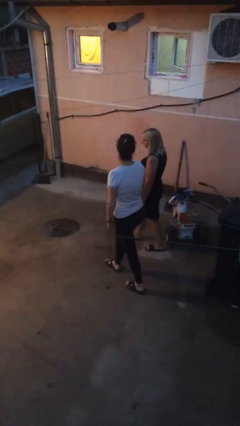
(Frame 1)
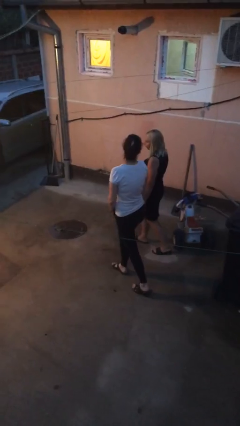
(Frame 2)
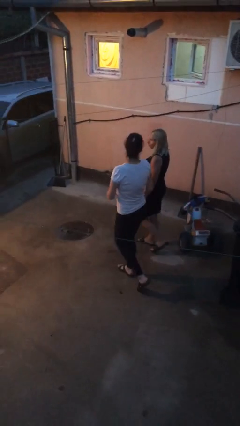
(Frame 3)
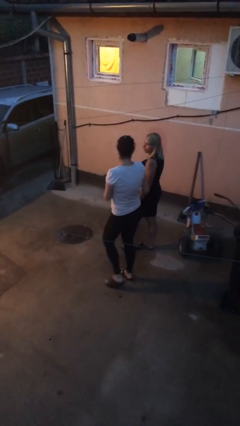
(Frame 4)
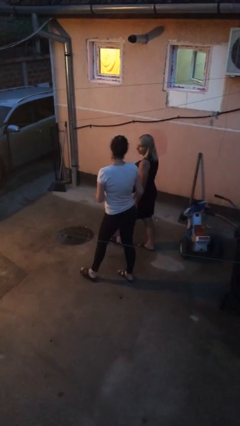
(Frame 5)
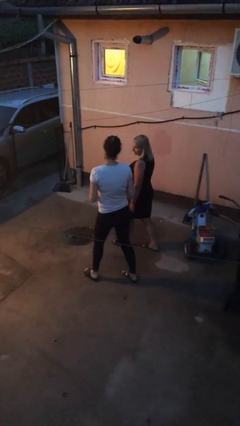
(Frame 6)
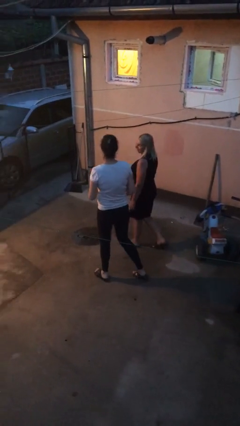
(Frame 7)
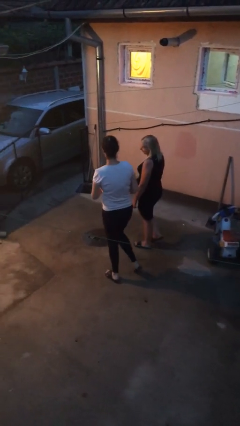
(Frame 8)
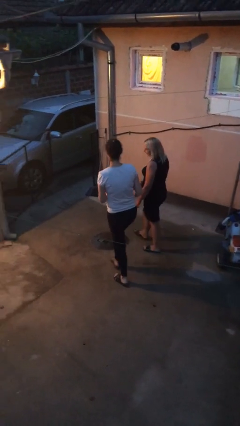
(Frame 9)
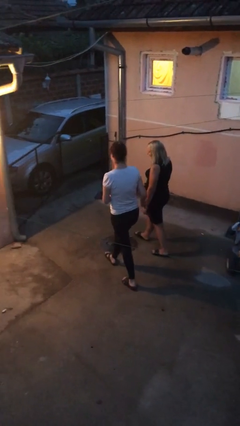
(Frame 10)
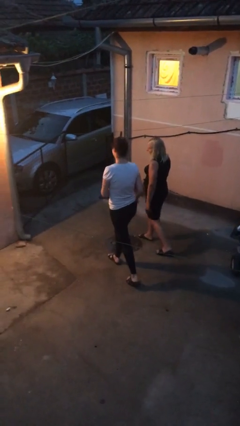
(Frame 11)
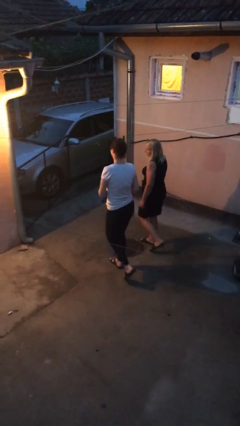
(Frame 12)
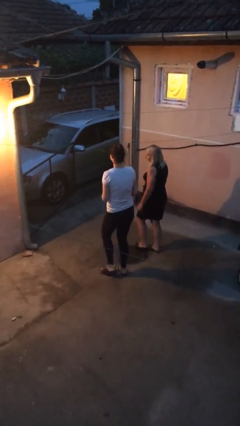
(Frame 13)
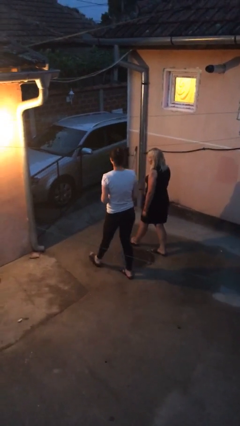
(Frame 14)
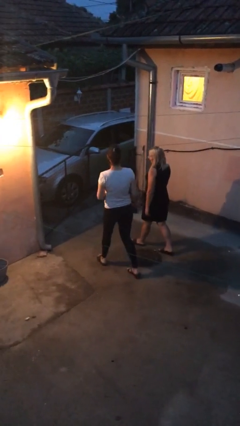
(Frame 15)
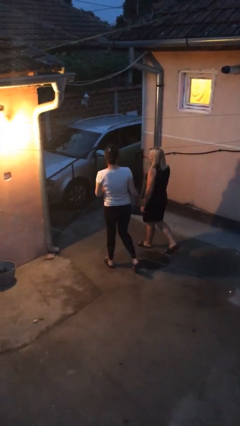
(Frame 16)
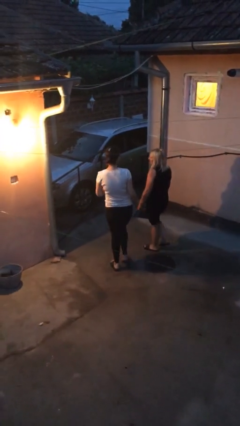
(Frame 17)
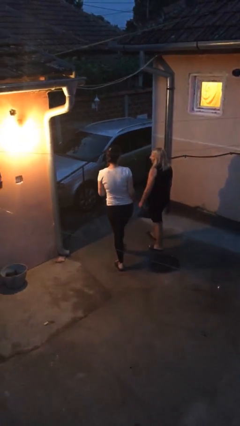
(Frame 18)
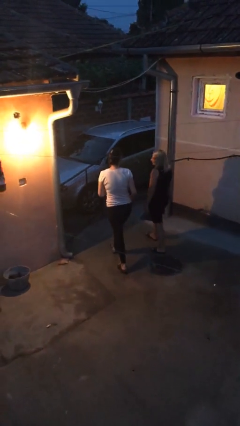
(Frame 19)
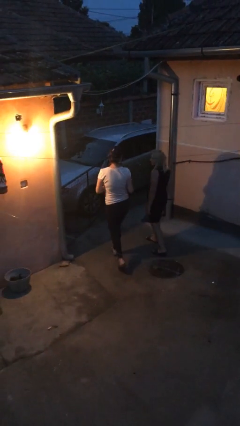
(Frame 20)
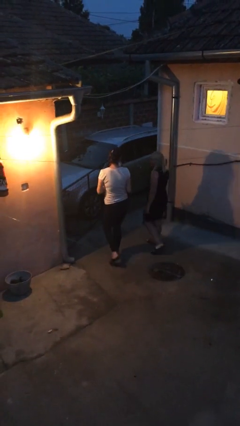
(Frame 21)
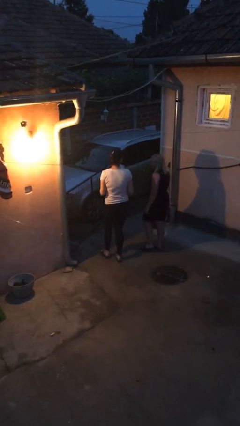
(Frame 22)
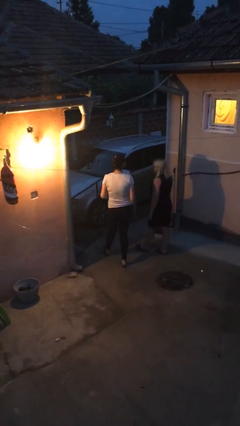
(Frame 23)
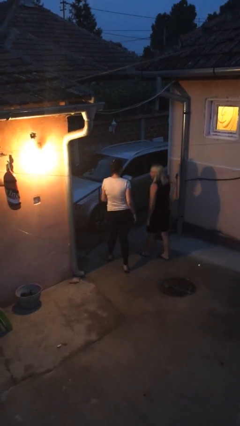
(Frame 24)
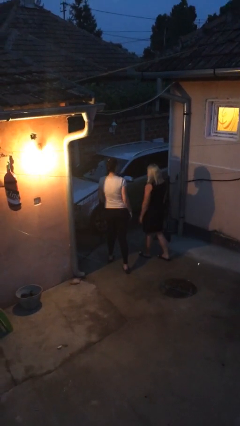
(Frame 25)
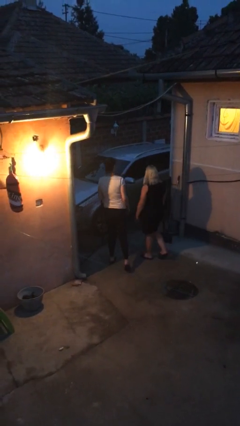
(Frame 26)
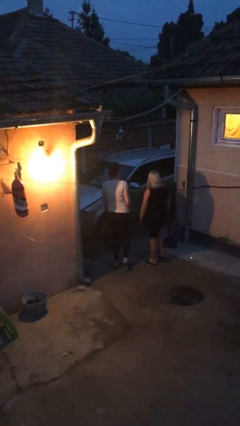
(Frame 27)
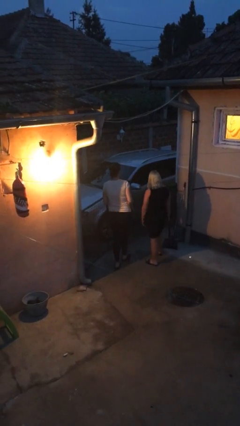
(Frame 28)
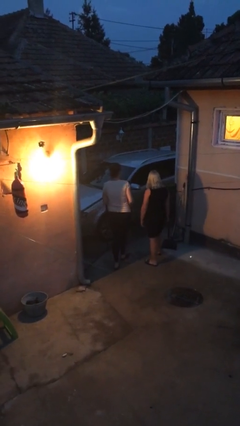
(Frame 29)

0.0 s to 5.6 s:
person talks to person

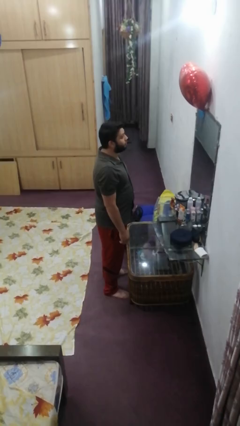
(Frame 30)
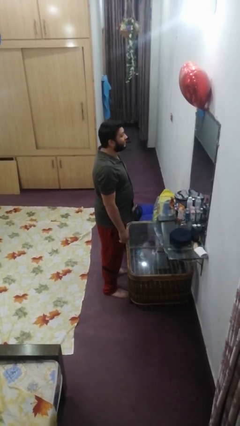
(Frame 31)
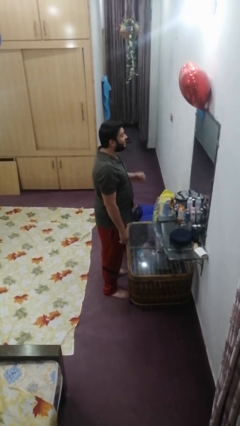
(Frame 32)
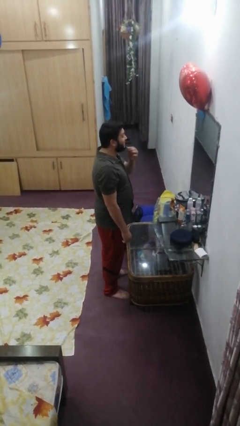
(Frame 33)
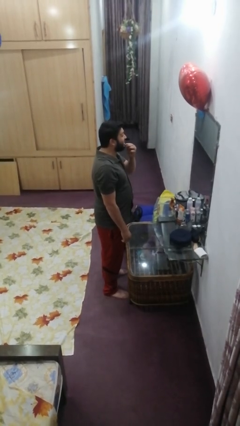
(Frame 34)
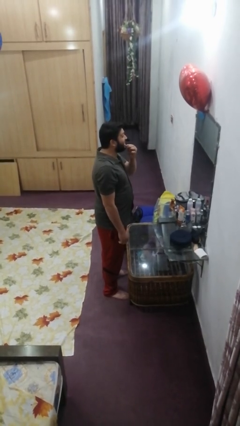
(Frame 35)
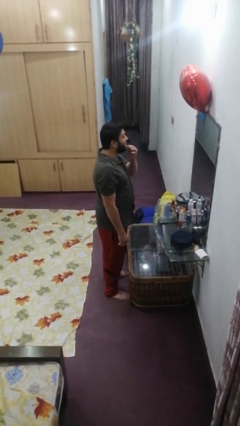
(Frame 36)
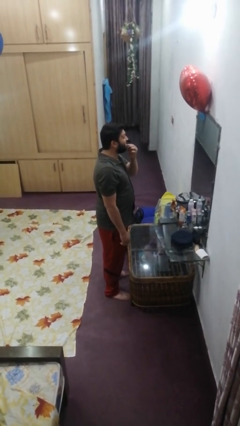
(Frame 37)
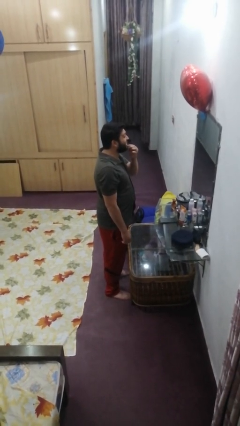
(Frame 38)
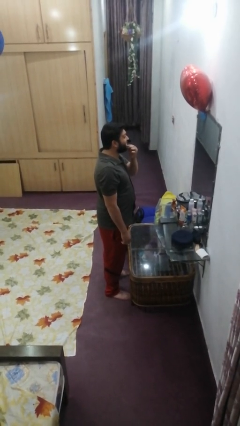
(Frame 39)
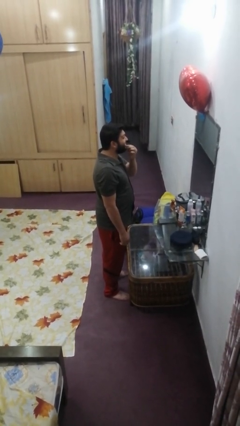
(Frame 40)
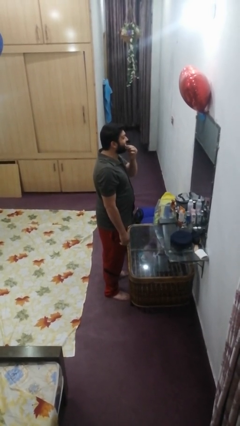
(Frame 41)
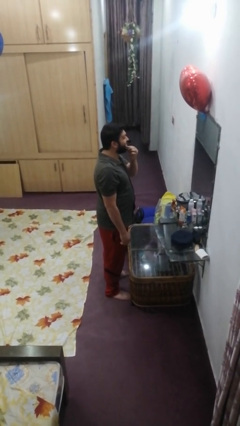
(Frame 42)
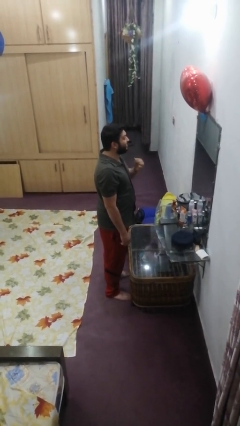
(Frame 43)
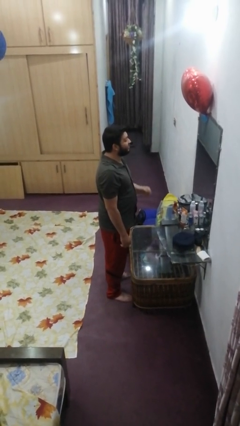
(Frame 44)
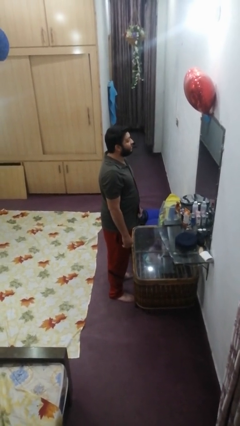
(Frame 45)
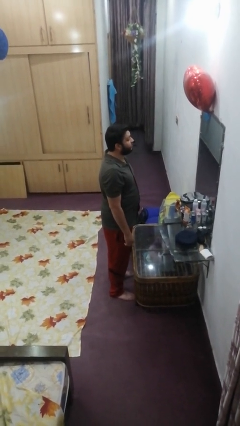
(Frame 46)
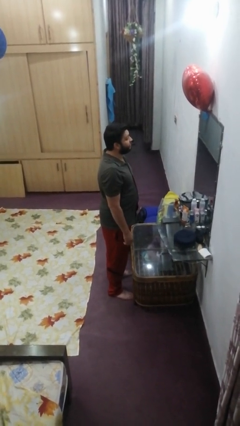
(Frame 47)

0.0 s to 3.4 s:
person flosses

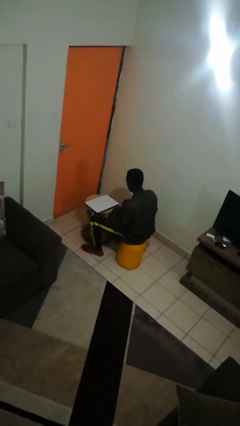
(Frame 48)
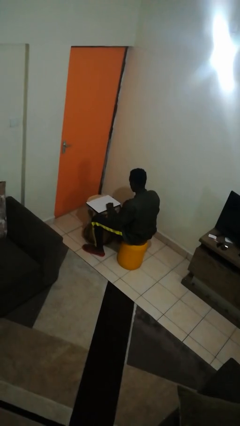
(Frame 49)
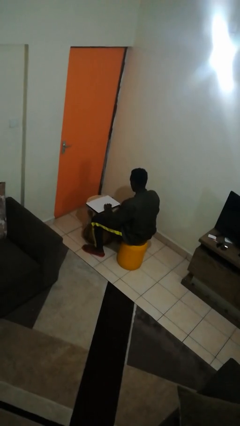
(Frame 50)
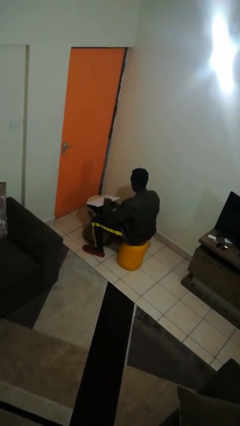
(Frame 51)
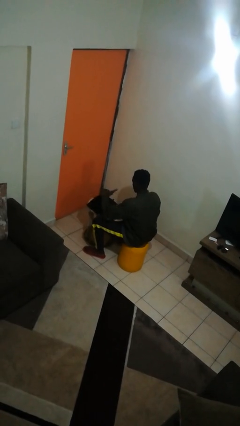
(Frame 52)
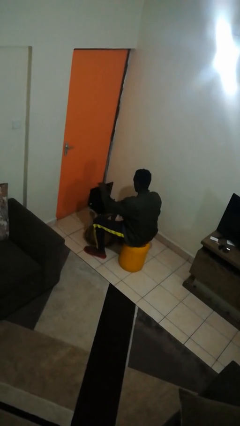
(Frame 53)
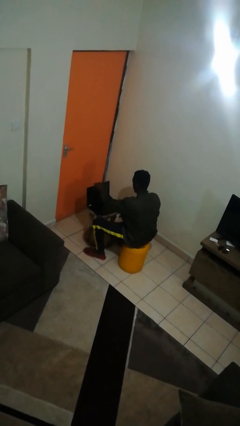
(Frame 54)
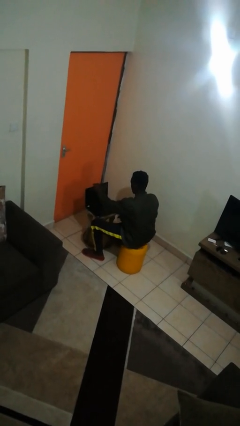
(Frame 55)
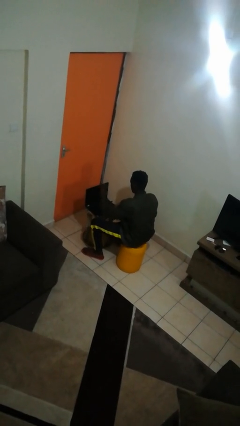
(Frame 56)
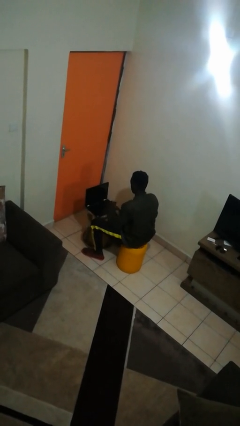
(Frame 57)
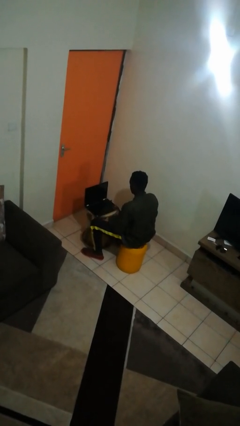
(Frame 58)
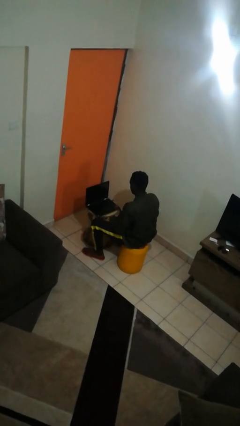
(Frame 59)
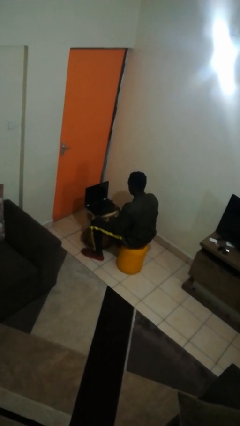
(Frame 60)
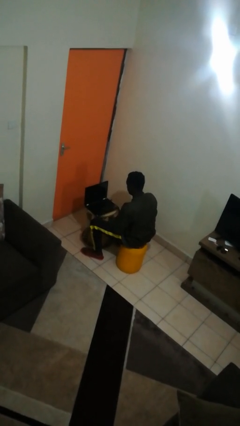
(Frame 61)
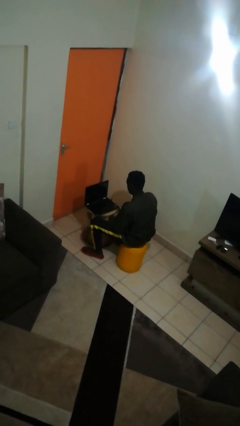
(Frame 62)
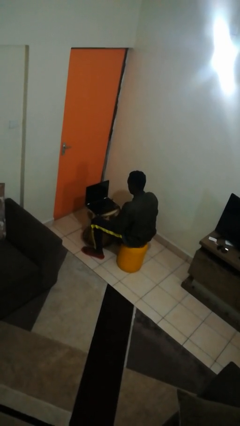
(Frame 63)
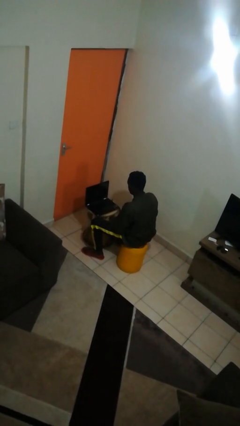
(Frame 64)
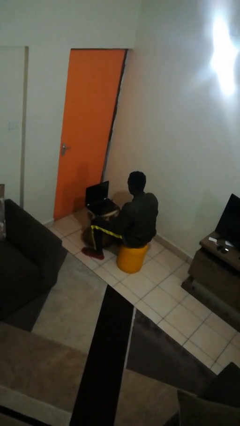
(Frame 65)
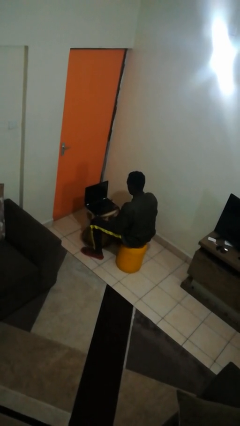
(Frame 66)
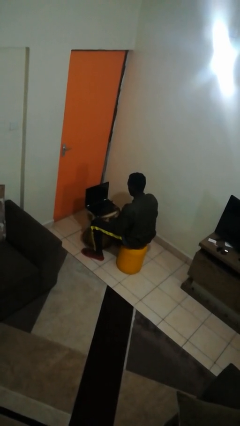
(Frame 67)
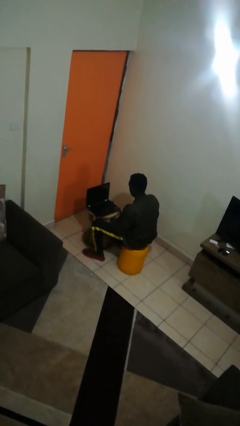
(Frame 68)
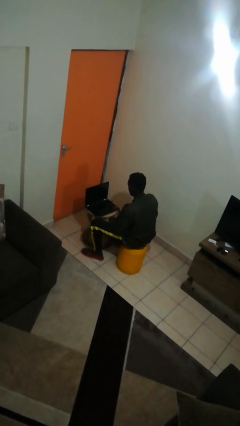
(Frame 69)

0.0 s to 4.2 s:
person opens laptop

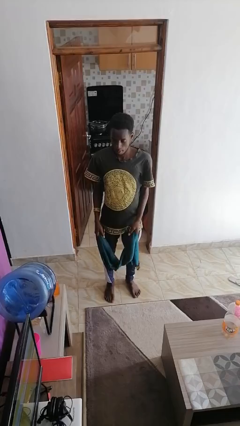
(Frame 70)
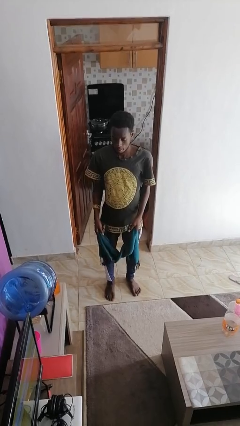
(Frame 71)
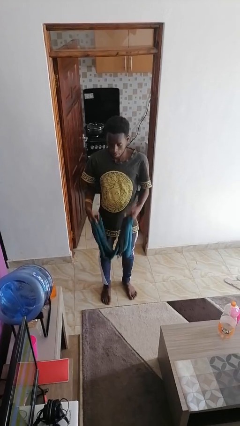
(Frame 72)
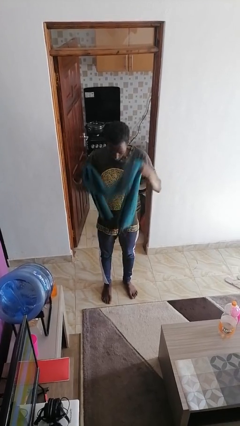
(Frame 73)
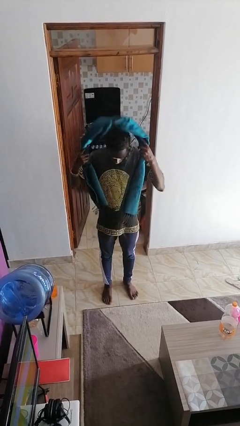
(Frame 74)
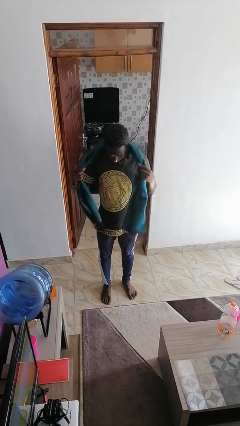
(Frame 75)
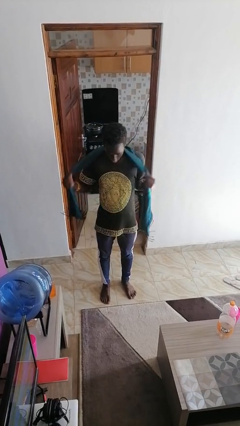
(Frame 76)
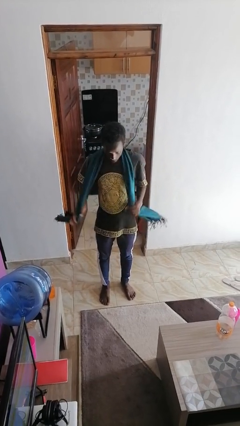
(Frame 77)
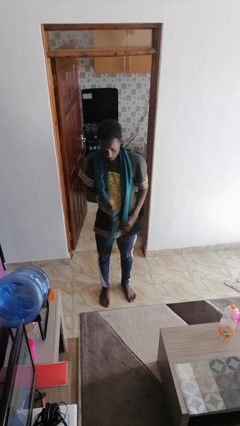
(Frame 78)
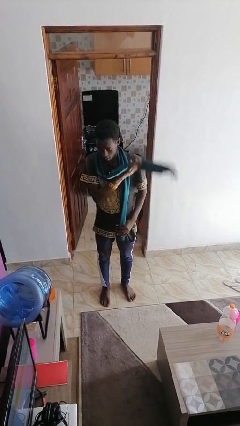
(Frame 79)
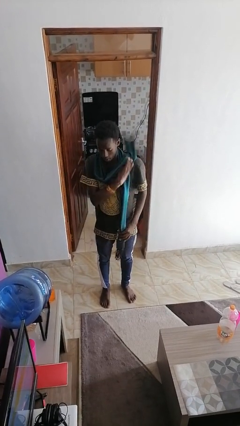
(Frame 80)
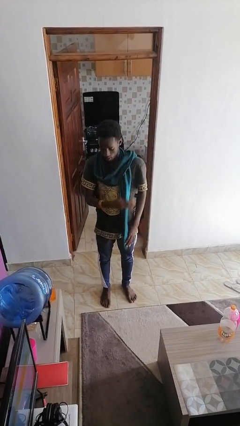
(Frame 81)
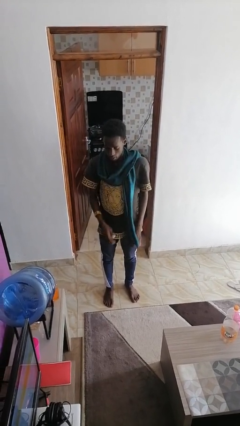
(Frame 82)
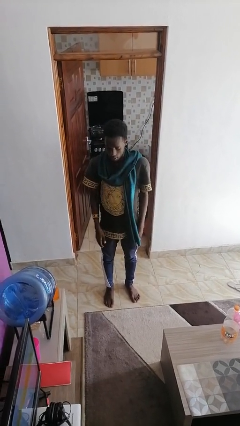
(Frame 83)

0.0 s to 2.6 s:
person puts on scarf

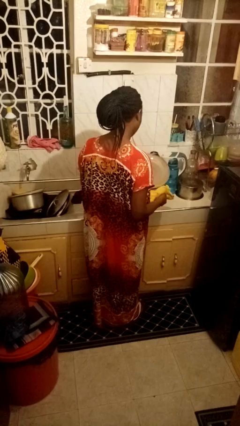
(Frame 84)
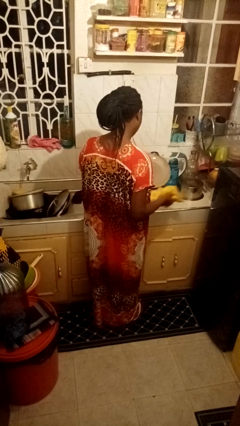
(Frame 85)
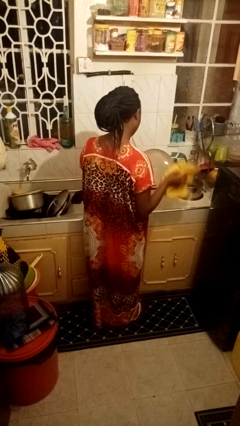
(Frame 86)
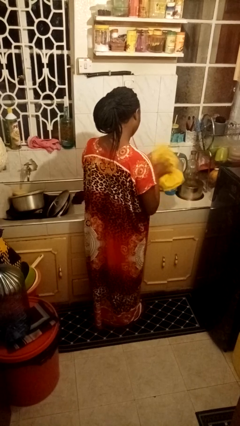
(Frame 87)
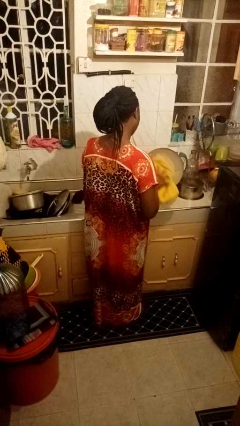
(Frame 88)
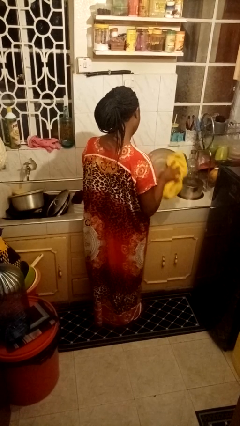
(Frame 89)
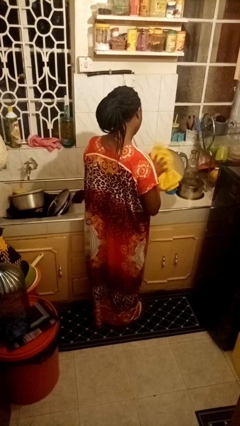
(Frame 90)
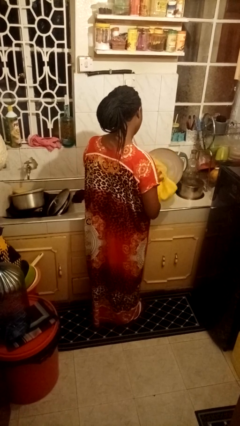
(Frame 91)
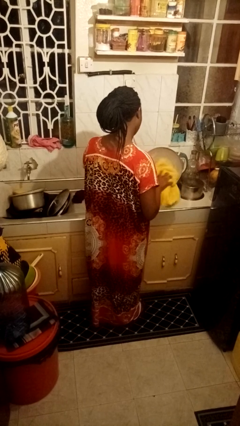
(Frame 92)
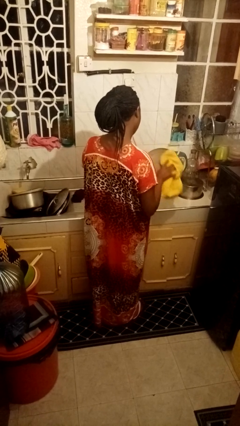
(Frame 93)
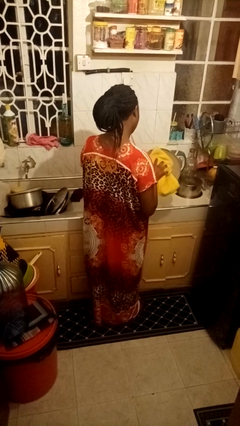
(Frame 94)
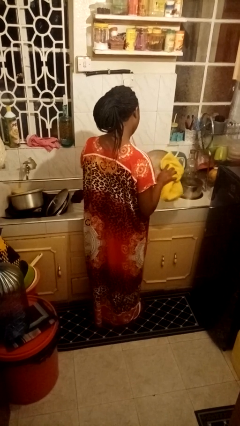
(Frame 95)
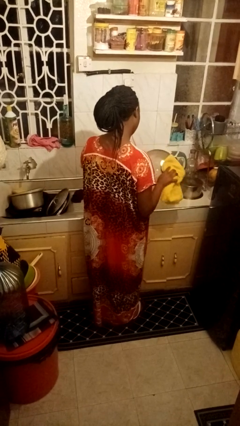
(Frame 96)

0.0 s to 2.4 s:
person dries dish
